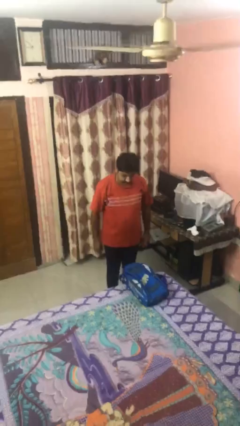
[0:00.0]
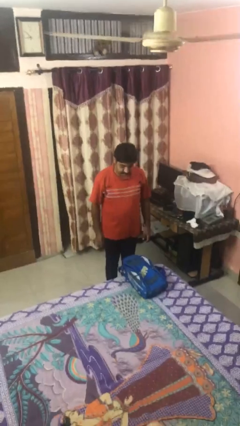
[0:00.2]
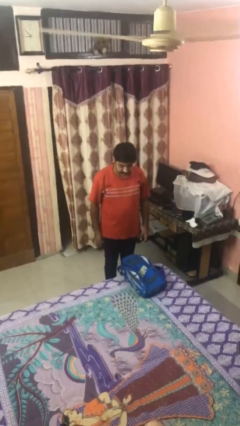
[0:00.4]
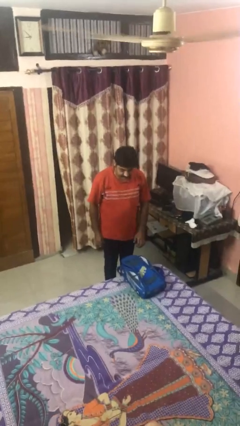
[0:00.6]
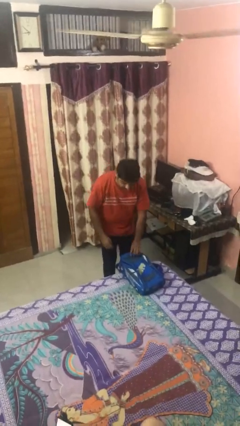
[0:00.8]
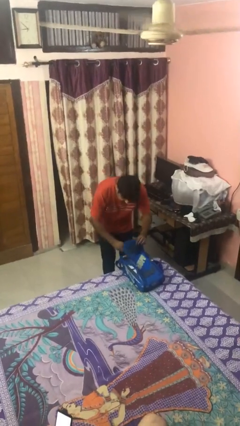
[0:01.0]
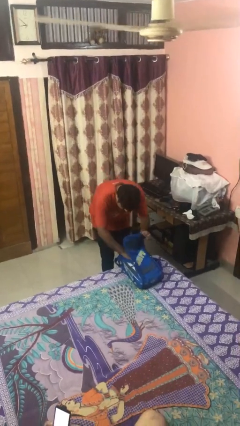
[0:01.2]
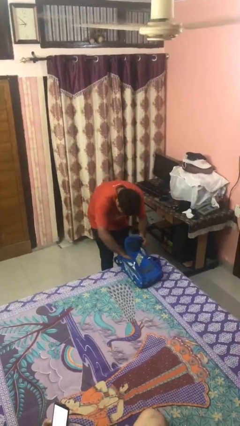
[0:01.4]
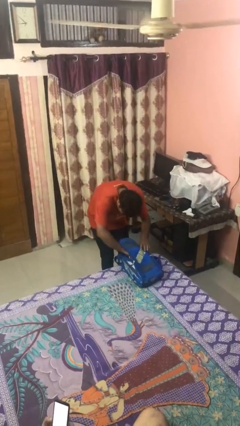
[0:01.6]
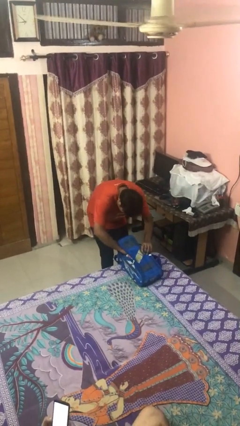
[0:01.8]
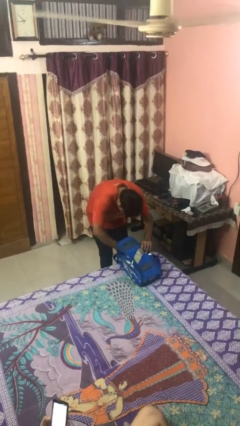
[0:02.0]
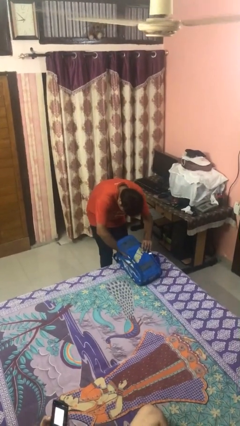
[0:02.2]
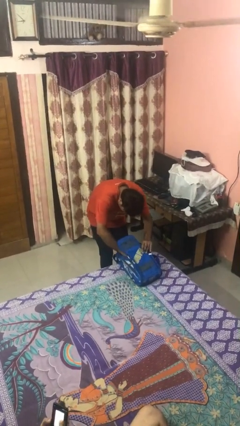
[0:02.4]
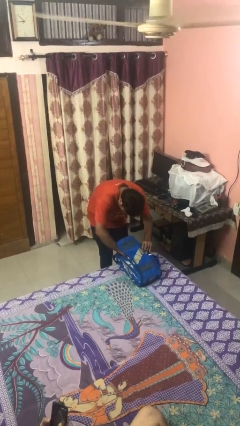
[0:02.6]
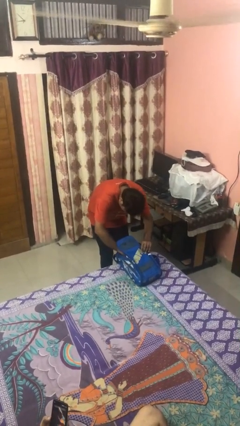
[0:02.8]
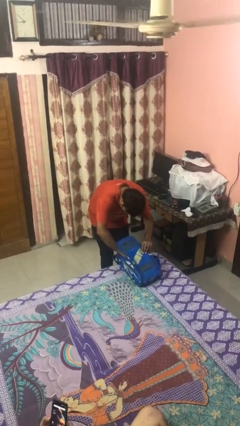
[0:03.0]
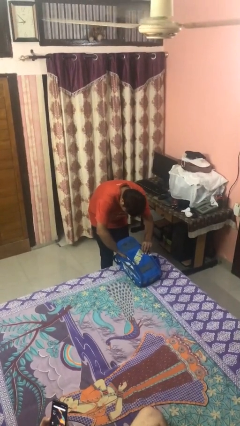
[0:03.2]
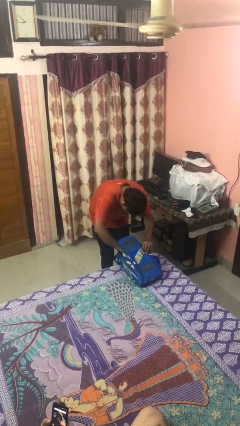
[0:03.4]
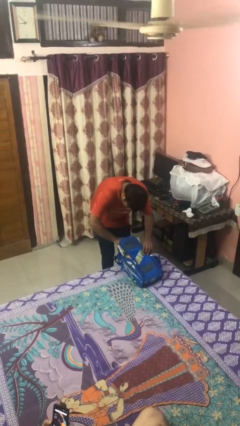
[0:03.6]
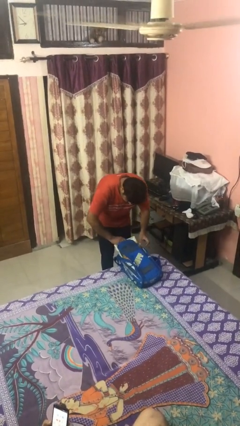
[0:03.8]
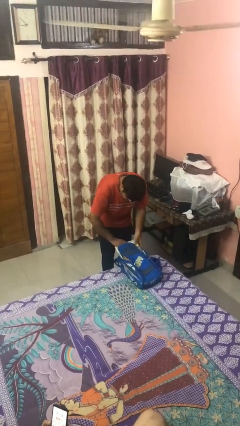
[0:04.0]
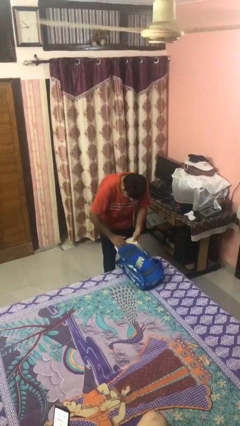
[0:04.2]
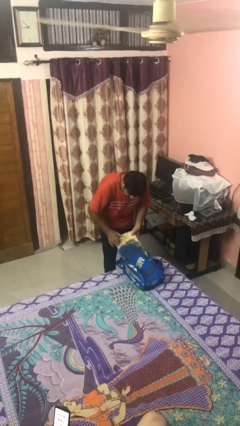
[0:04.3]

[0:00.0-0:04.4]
person searches in backpack

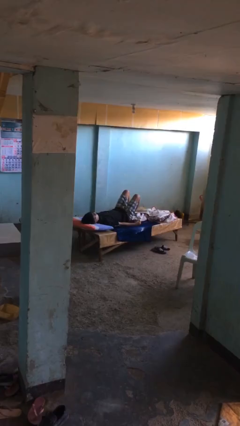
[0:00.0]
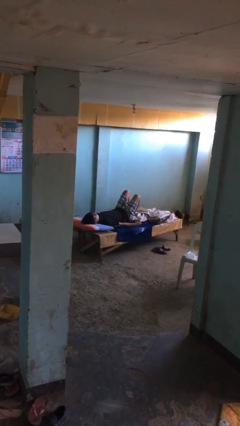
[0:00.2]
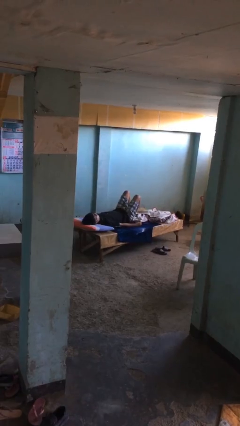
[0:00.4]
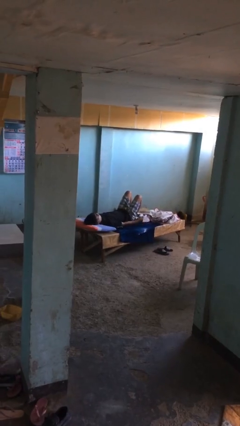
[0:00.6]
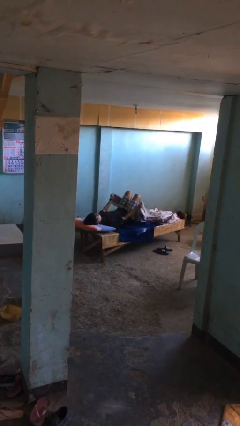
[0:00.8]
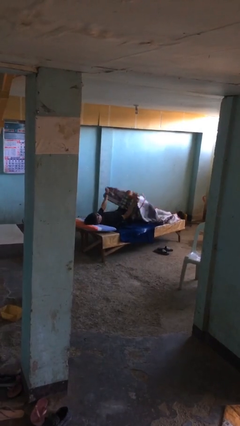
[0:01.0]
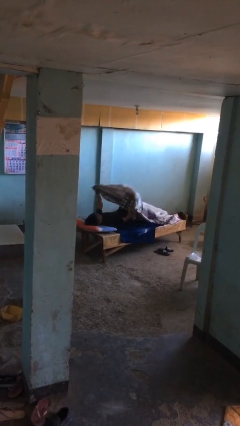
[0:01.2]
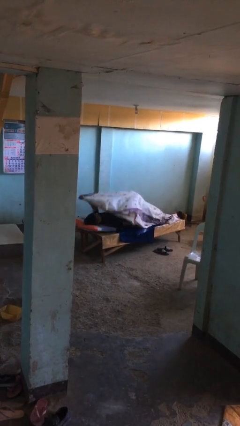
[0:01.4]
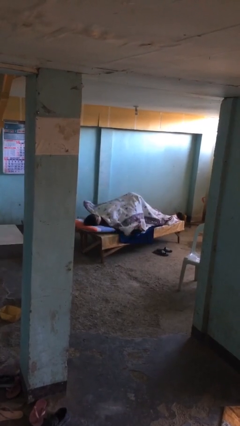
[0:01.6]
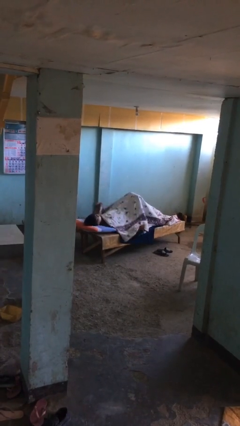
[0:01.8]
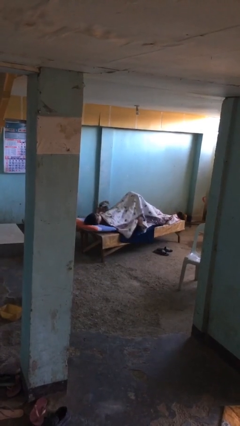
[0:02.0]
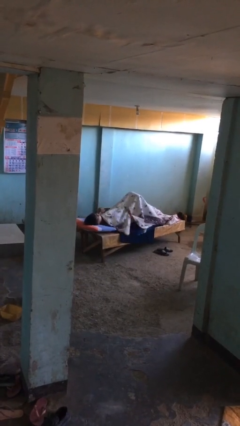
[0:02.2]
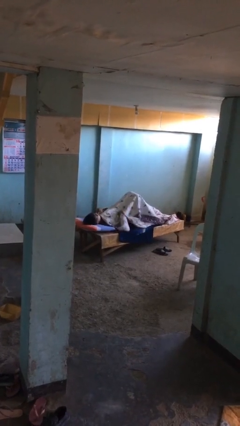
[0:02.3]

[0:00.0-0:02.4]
person covers with bedsheets

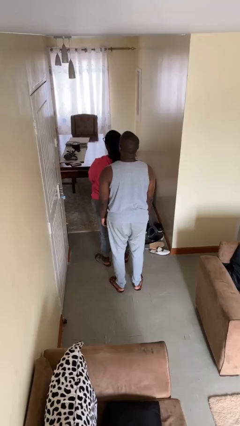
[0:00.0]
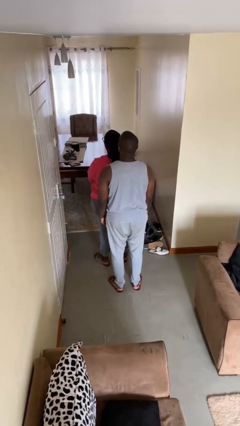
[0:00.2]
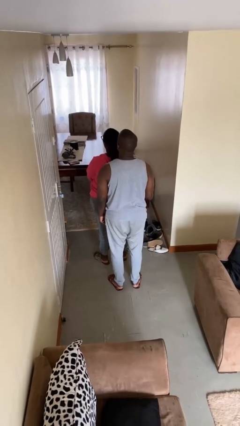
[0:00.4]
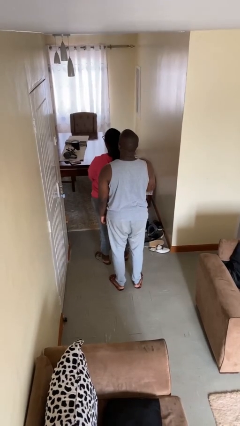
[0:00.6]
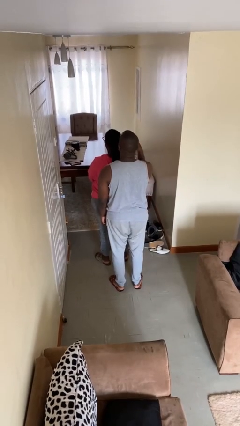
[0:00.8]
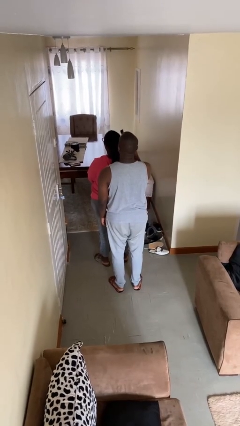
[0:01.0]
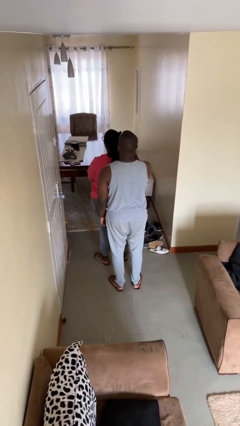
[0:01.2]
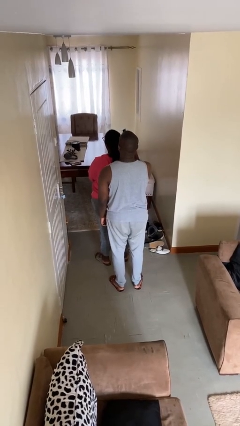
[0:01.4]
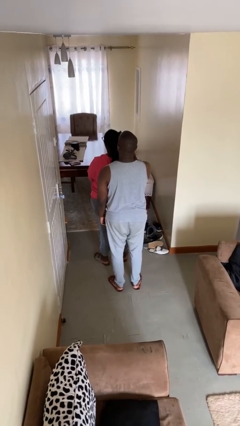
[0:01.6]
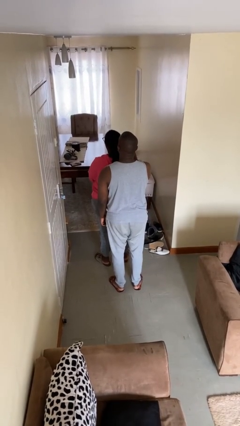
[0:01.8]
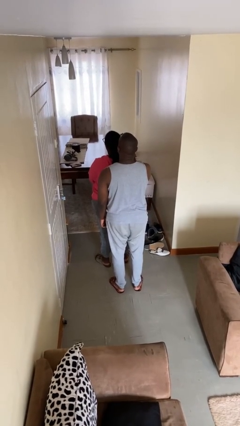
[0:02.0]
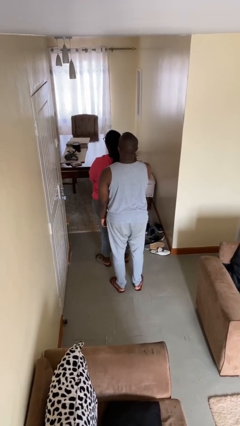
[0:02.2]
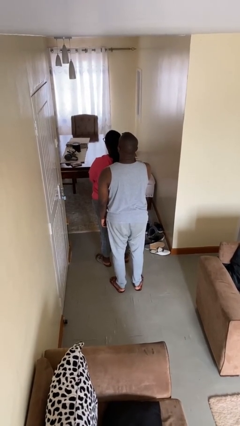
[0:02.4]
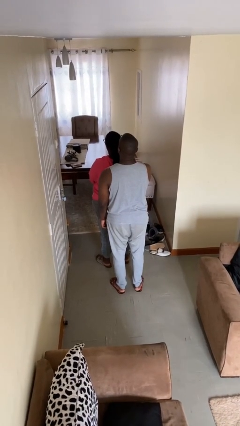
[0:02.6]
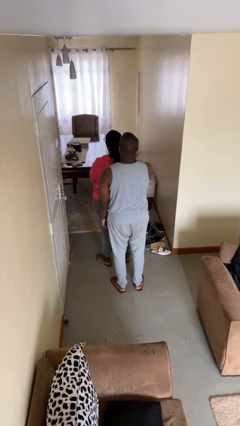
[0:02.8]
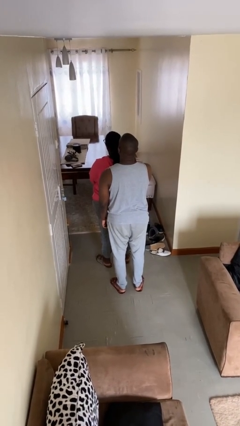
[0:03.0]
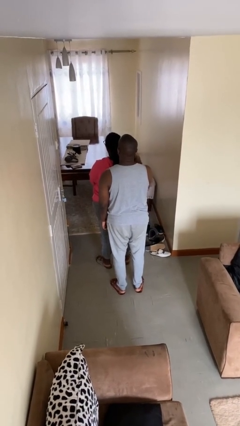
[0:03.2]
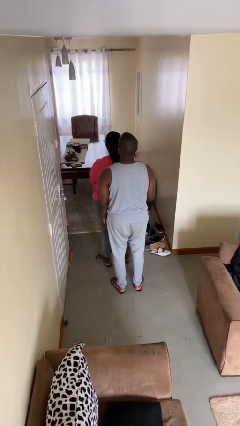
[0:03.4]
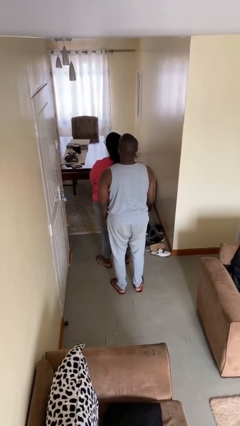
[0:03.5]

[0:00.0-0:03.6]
person brushes hair of person

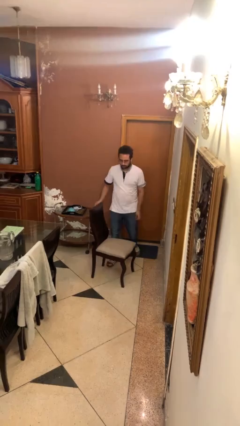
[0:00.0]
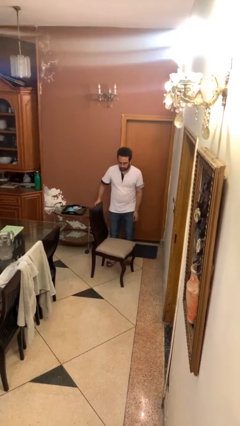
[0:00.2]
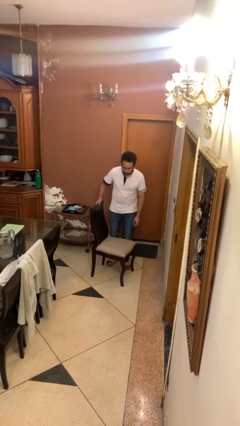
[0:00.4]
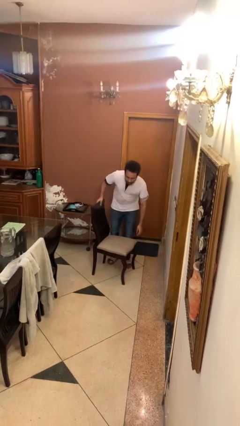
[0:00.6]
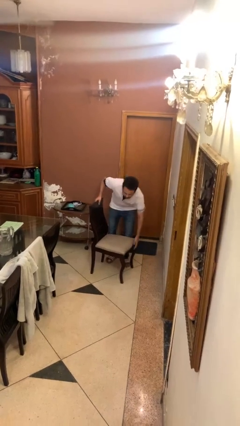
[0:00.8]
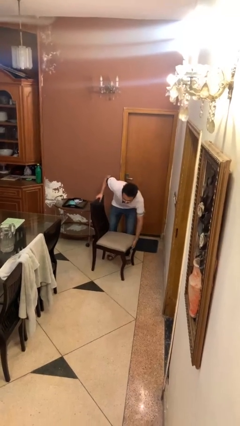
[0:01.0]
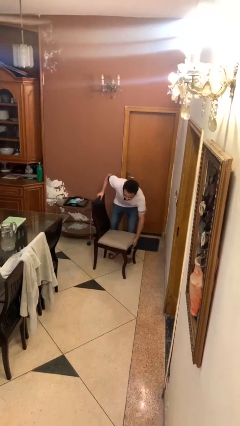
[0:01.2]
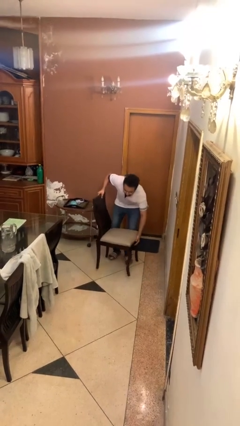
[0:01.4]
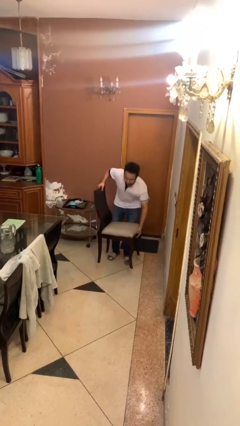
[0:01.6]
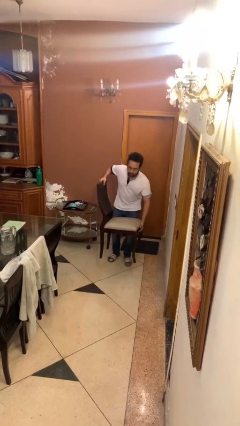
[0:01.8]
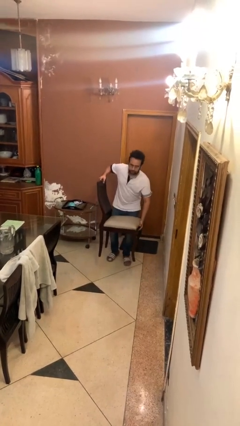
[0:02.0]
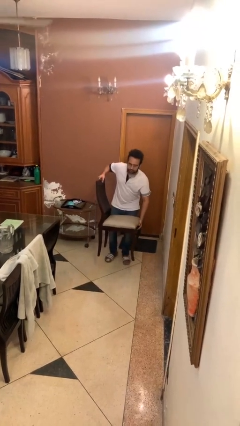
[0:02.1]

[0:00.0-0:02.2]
person picks up object from floor
